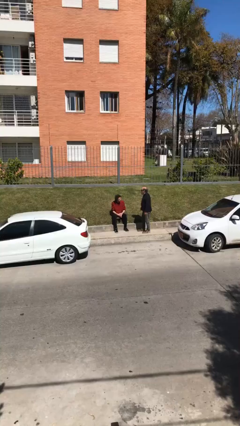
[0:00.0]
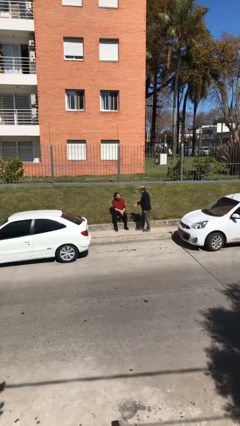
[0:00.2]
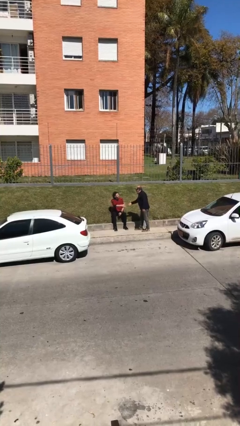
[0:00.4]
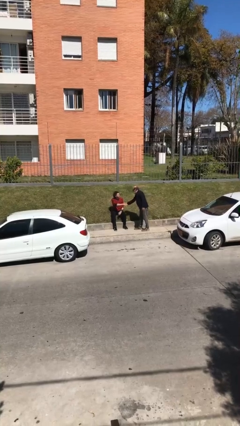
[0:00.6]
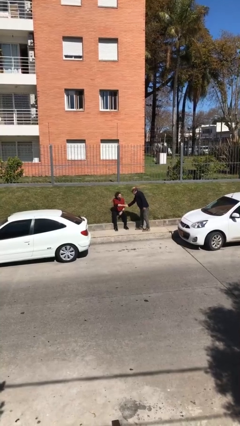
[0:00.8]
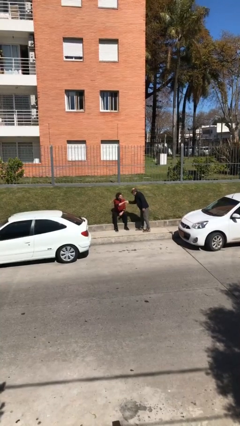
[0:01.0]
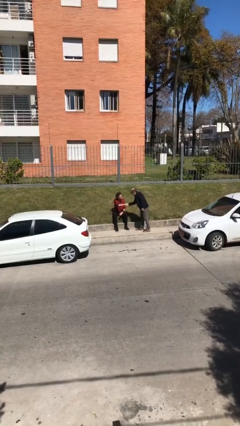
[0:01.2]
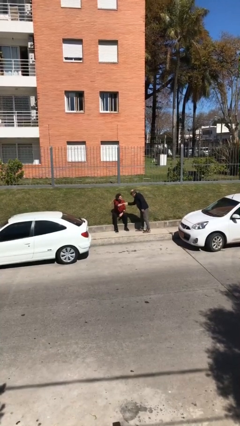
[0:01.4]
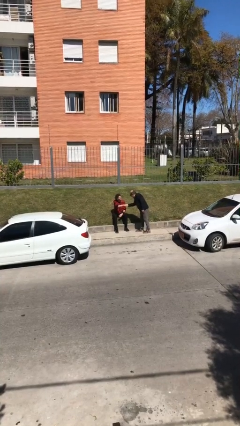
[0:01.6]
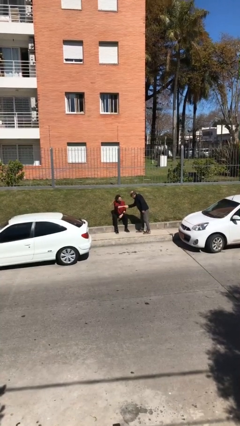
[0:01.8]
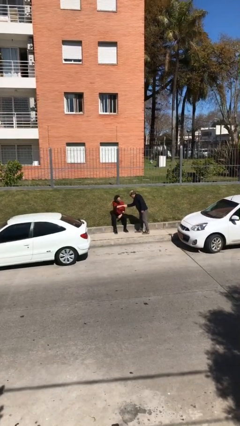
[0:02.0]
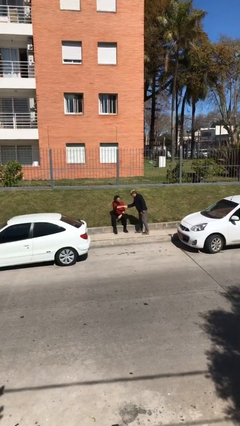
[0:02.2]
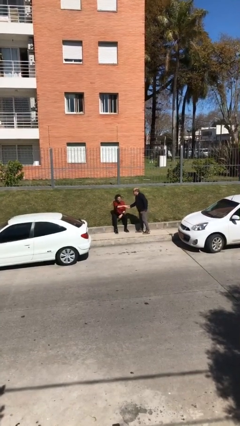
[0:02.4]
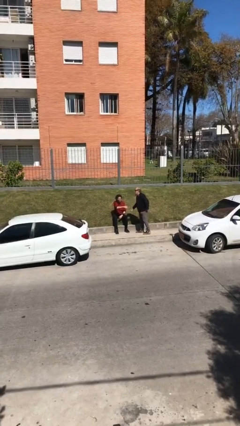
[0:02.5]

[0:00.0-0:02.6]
person shakes hand

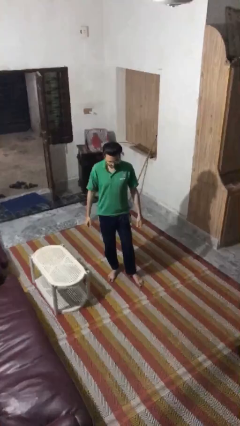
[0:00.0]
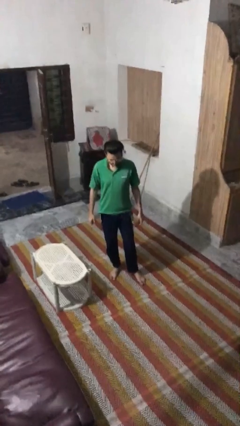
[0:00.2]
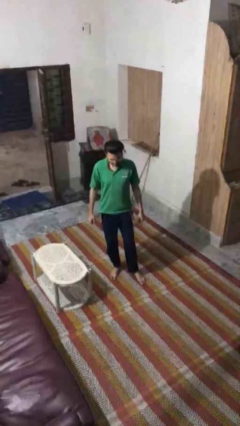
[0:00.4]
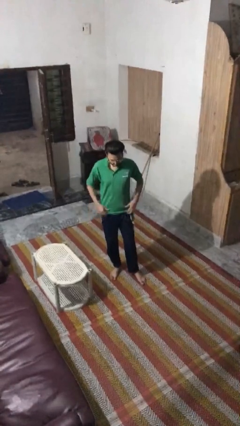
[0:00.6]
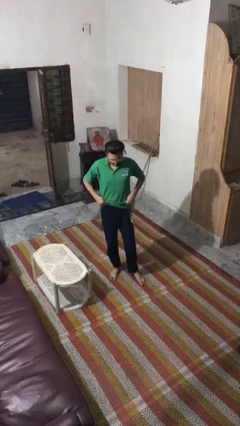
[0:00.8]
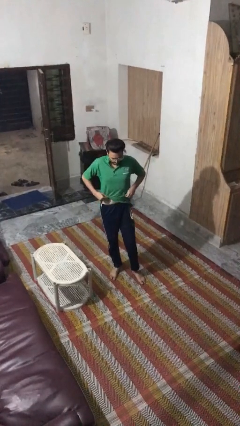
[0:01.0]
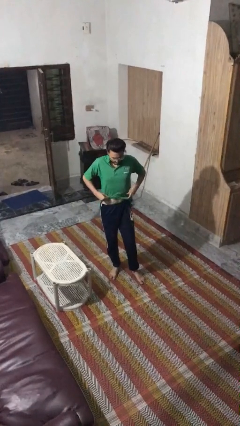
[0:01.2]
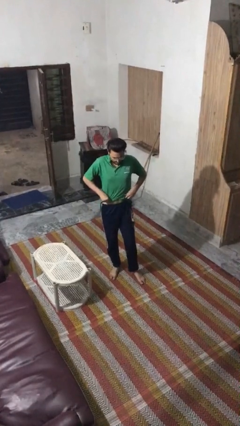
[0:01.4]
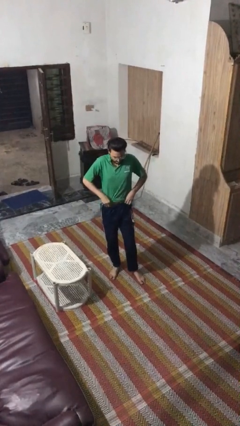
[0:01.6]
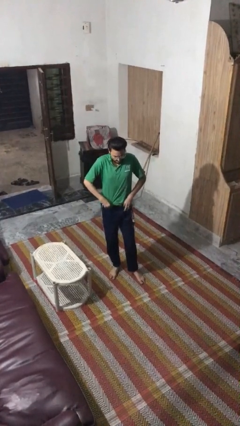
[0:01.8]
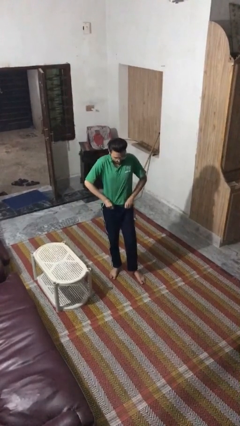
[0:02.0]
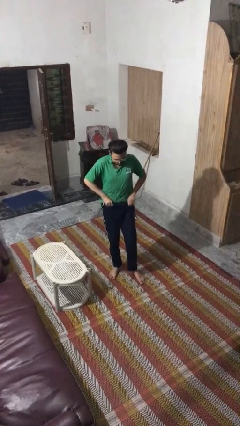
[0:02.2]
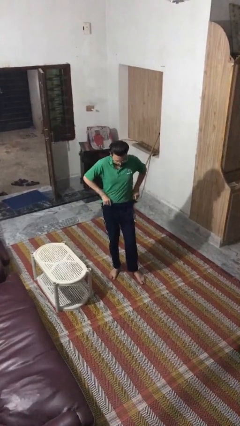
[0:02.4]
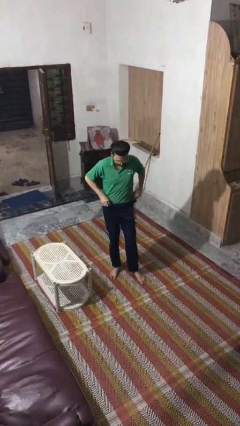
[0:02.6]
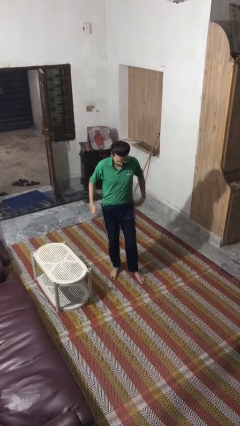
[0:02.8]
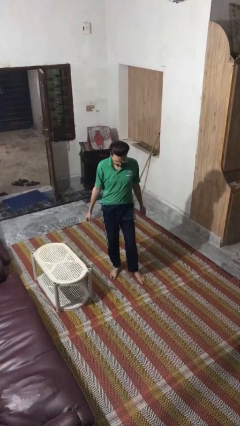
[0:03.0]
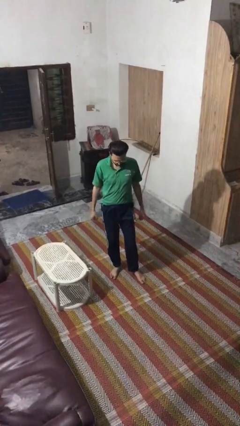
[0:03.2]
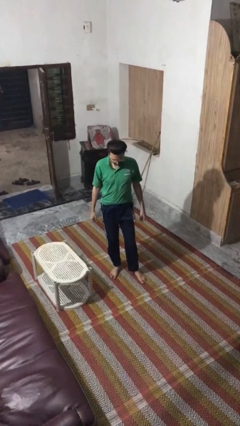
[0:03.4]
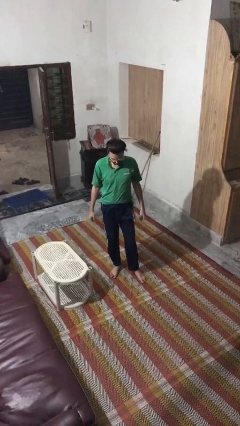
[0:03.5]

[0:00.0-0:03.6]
person tucks in shirt

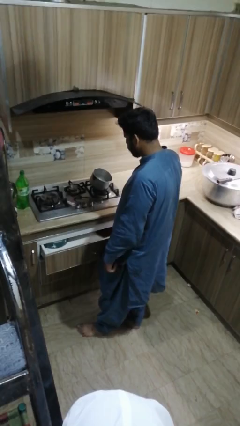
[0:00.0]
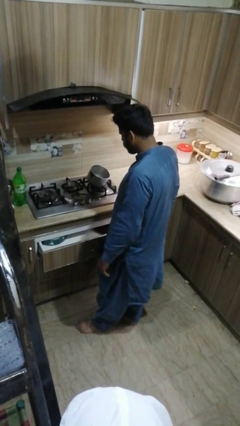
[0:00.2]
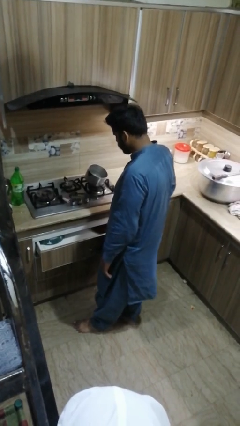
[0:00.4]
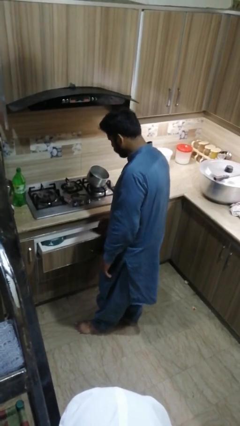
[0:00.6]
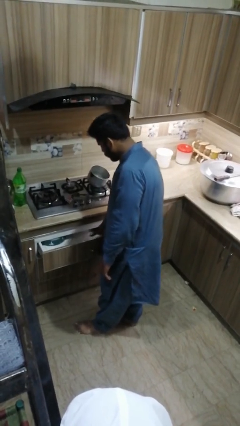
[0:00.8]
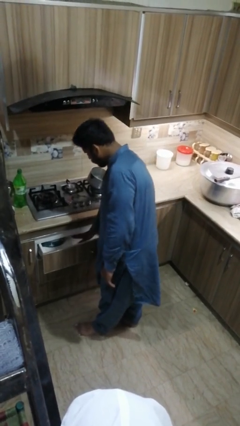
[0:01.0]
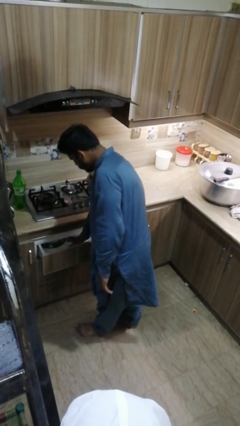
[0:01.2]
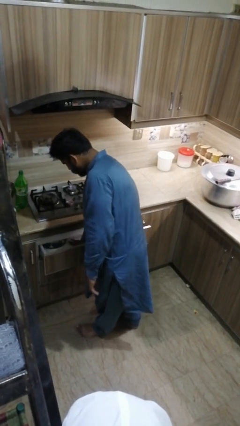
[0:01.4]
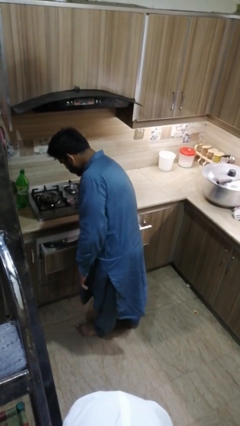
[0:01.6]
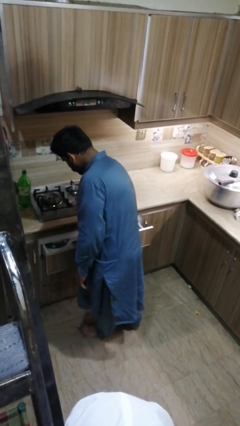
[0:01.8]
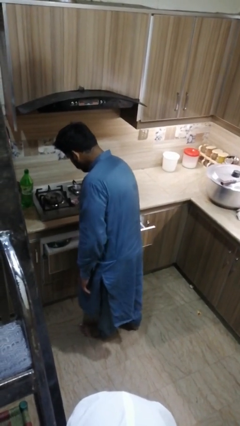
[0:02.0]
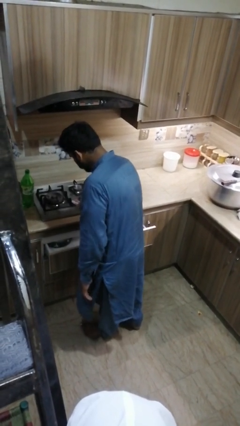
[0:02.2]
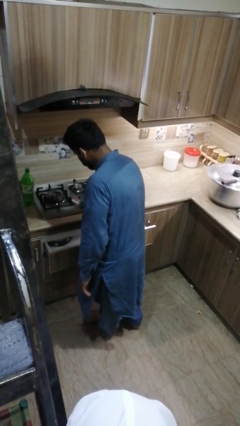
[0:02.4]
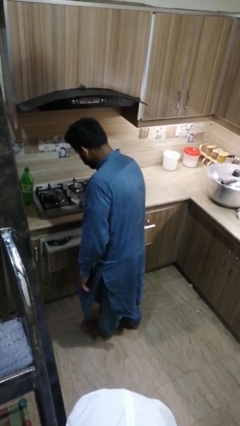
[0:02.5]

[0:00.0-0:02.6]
person searches in kitchen drawer

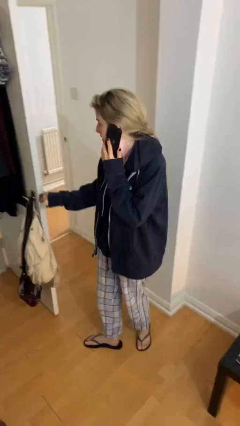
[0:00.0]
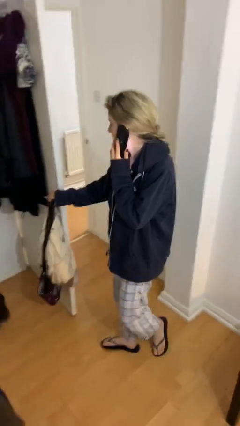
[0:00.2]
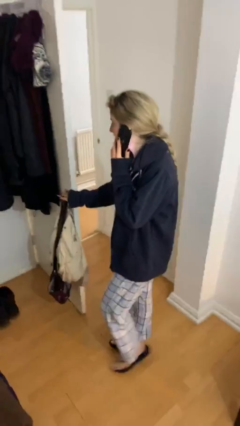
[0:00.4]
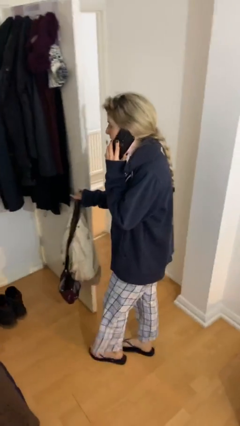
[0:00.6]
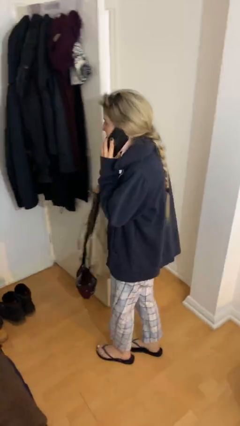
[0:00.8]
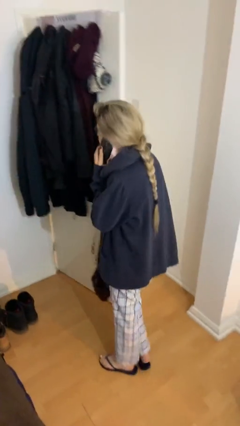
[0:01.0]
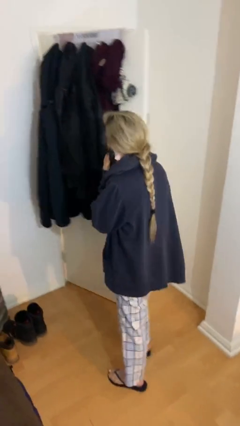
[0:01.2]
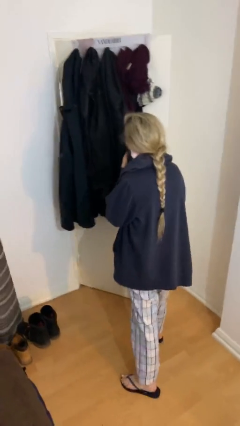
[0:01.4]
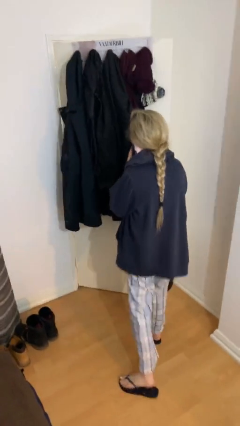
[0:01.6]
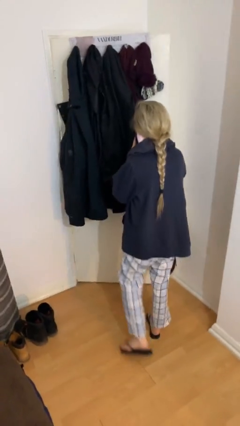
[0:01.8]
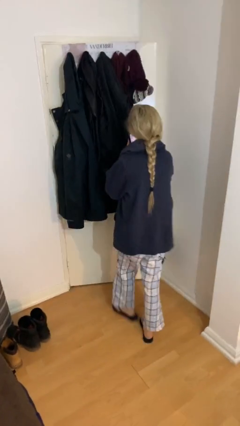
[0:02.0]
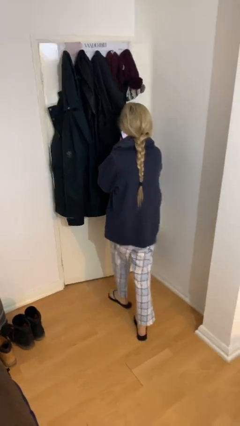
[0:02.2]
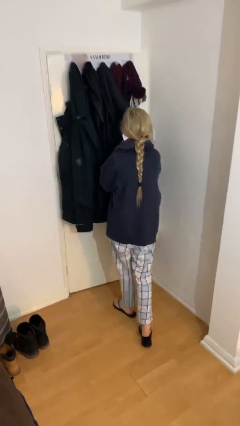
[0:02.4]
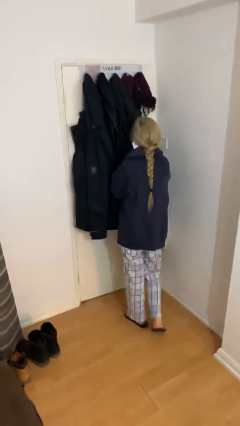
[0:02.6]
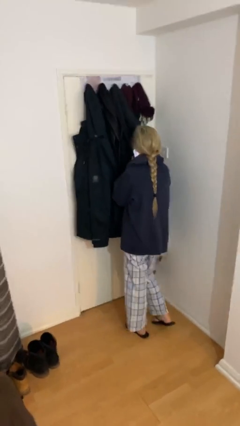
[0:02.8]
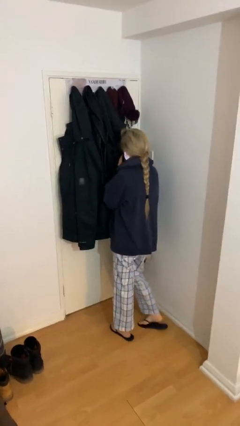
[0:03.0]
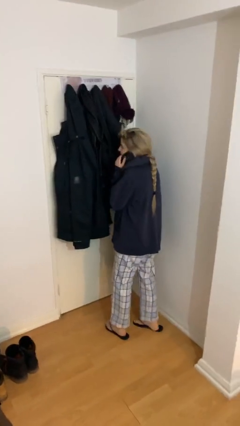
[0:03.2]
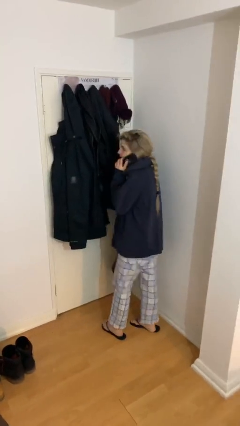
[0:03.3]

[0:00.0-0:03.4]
person closes facility door

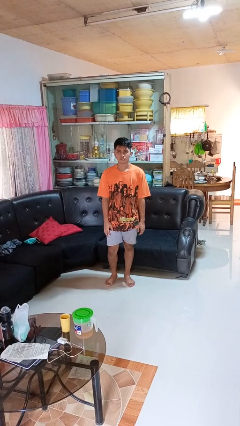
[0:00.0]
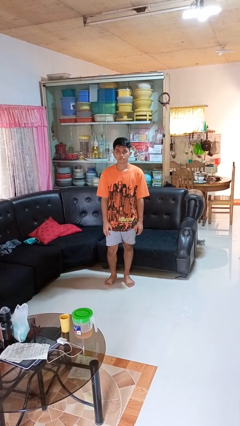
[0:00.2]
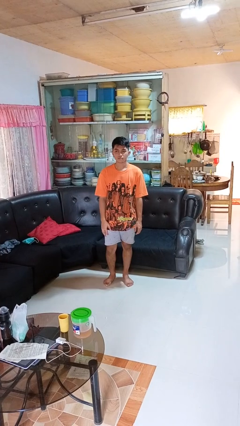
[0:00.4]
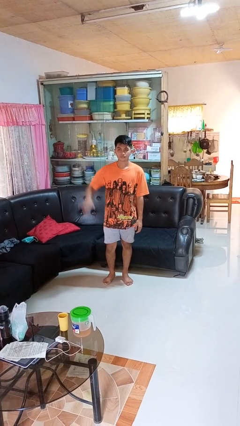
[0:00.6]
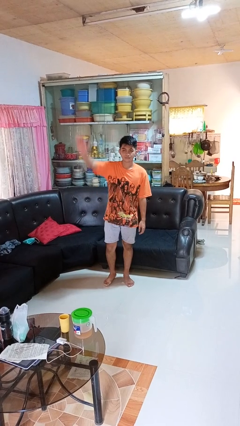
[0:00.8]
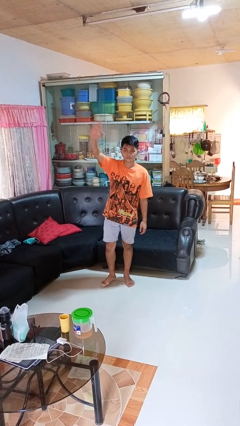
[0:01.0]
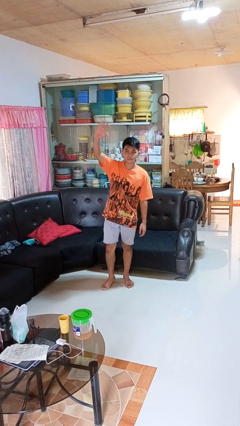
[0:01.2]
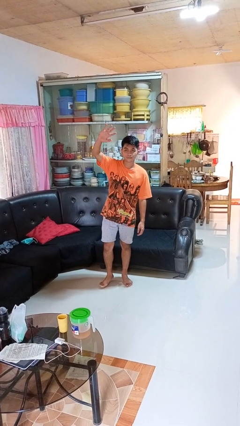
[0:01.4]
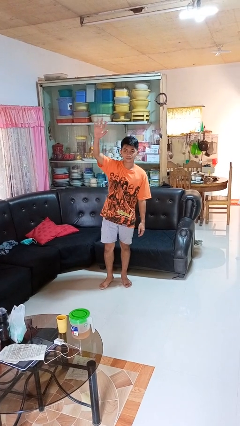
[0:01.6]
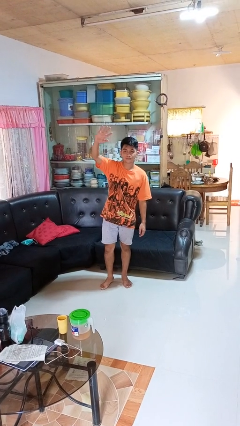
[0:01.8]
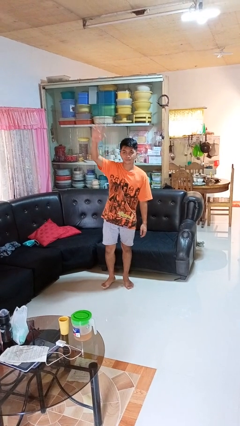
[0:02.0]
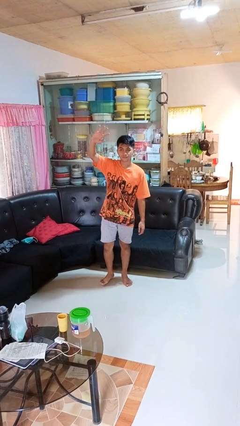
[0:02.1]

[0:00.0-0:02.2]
person waves at person

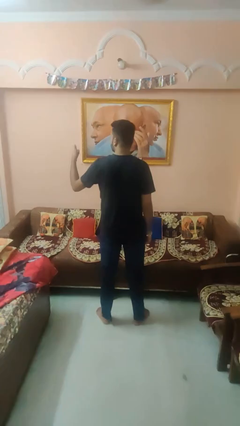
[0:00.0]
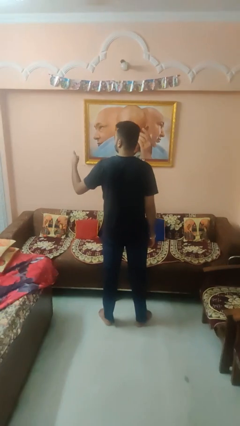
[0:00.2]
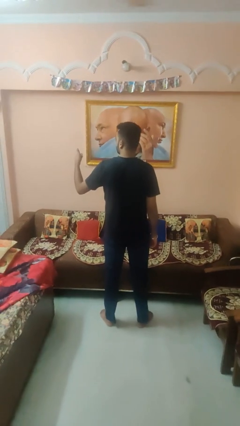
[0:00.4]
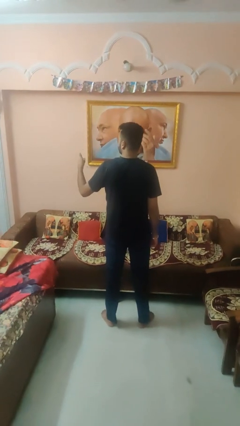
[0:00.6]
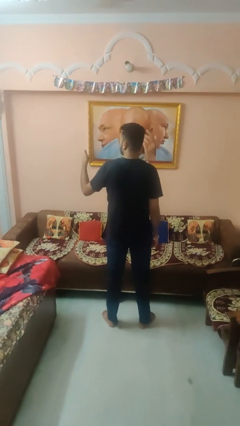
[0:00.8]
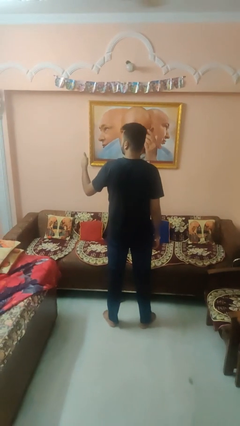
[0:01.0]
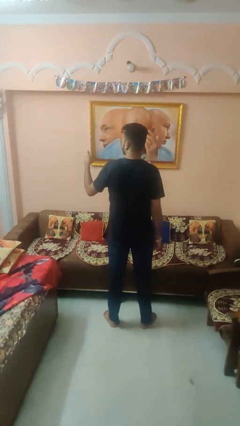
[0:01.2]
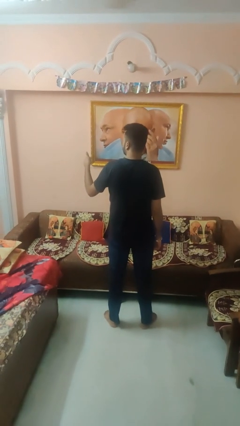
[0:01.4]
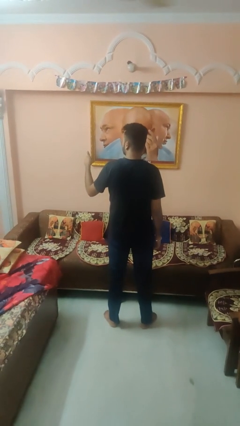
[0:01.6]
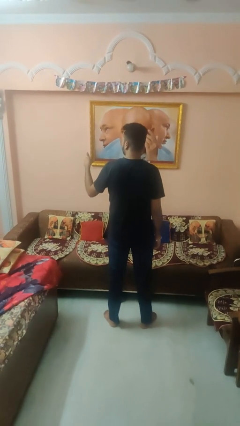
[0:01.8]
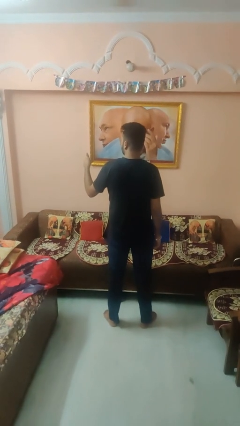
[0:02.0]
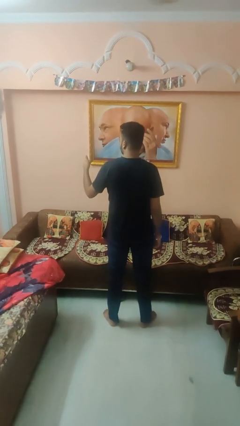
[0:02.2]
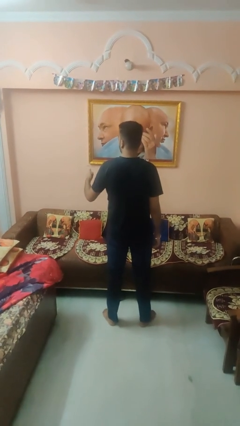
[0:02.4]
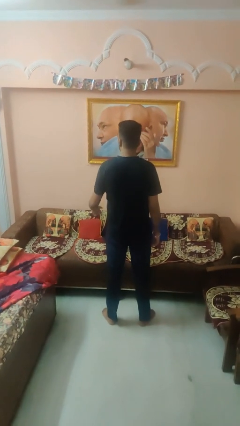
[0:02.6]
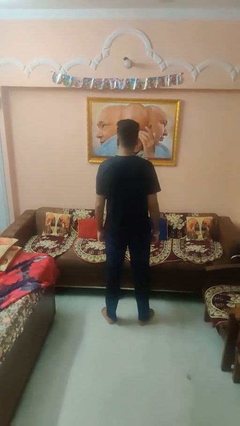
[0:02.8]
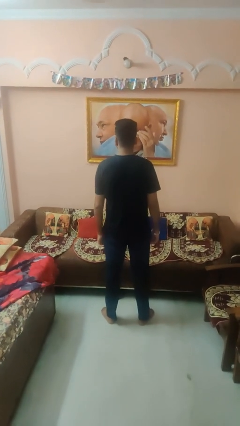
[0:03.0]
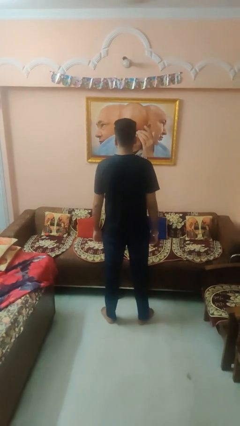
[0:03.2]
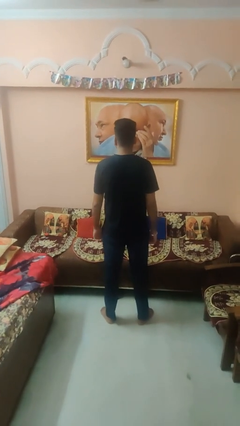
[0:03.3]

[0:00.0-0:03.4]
person gestures thumbs up
